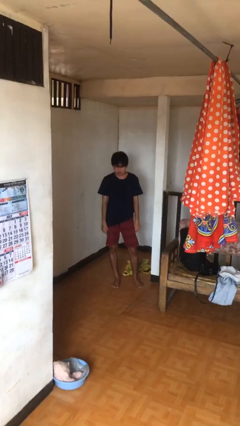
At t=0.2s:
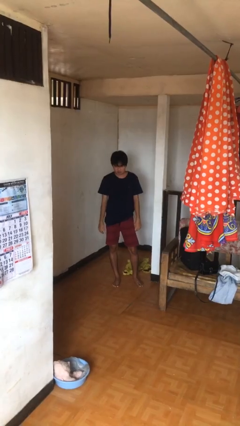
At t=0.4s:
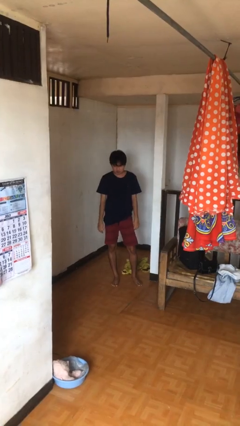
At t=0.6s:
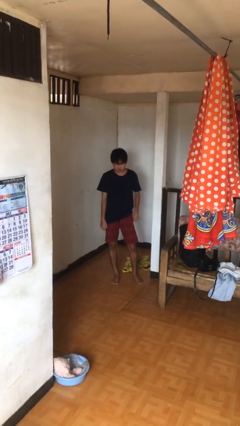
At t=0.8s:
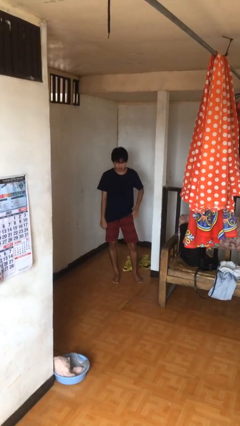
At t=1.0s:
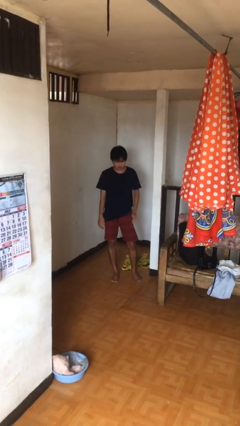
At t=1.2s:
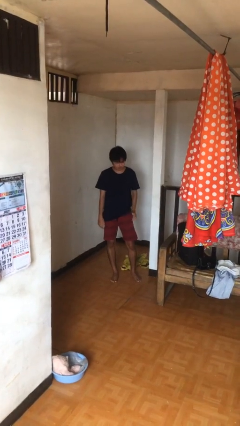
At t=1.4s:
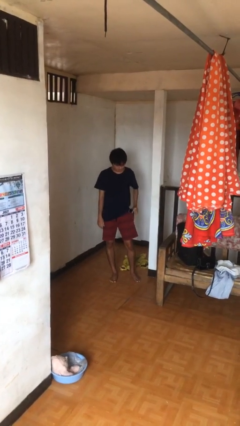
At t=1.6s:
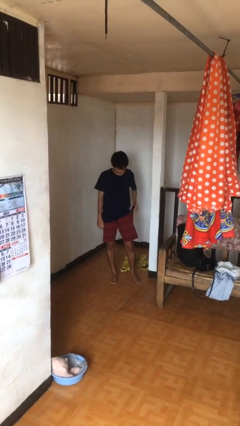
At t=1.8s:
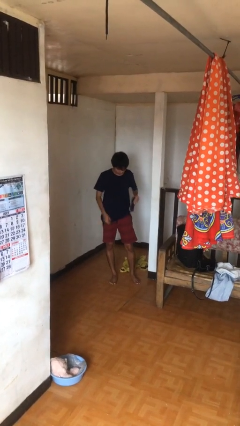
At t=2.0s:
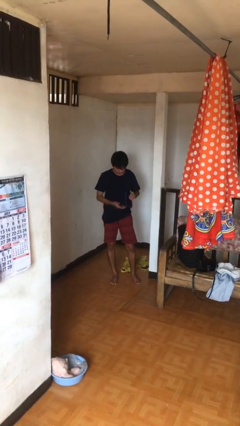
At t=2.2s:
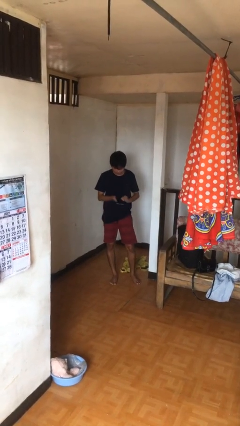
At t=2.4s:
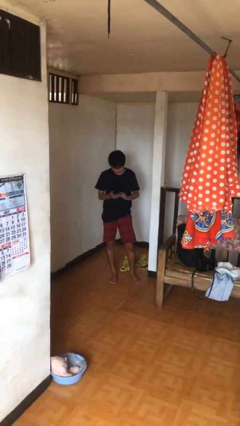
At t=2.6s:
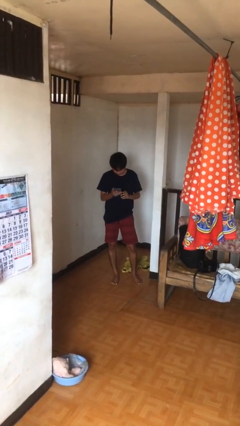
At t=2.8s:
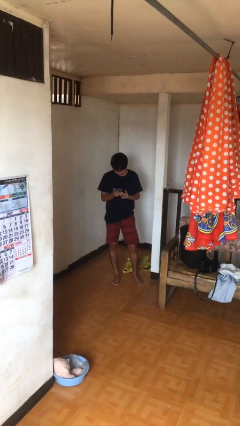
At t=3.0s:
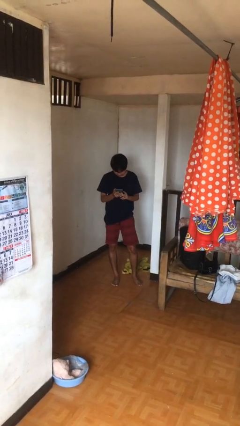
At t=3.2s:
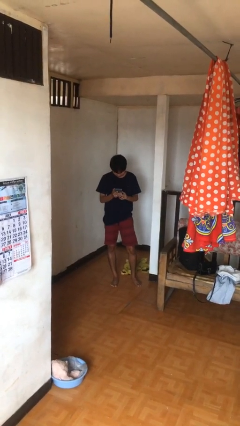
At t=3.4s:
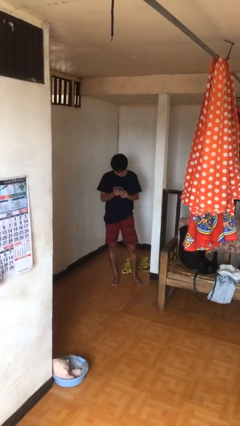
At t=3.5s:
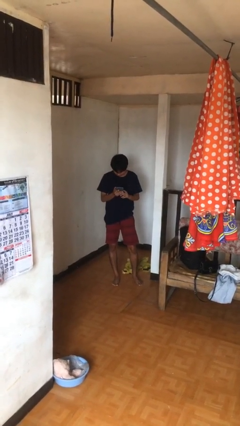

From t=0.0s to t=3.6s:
person takes phone from pocket

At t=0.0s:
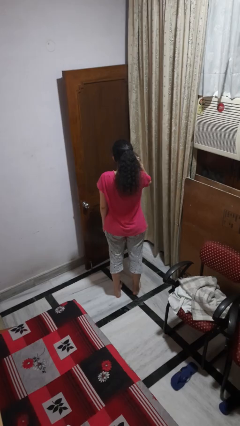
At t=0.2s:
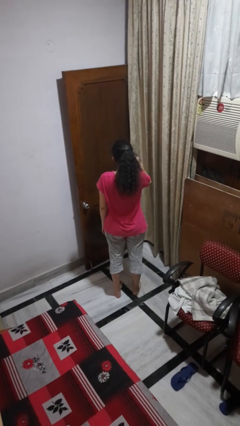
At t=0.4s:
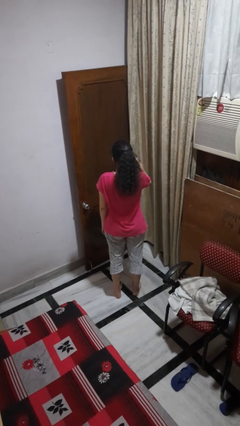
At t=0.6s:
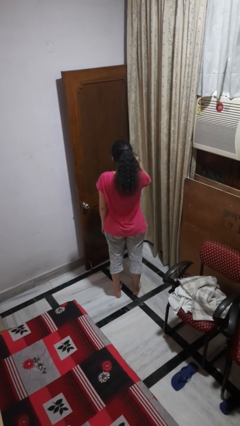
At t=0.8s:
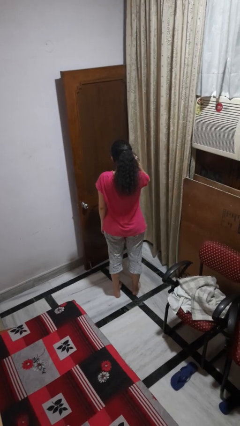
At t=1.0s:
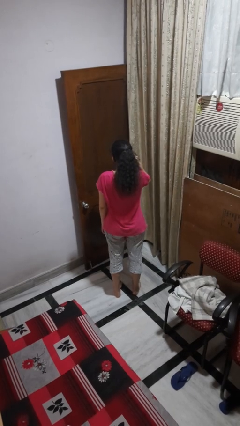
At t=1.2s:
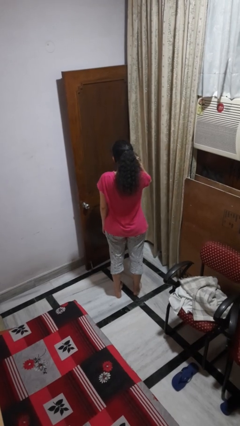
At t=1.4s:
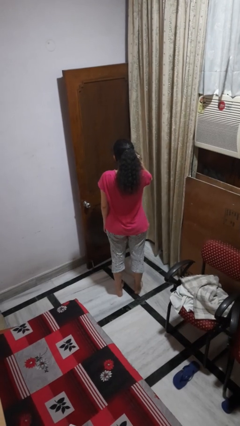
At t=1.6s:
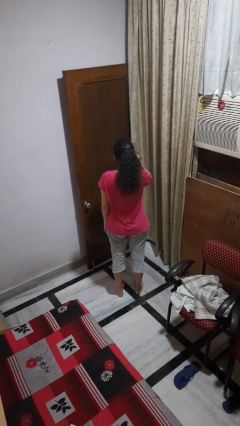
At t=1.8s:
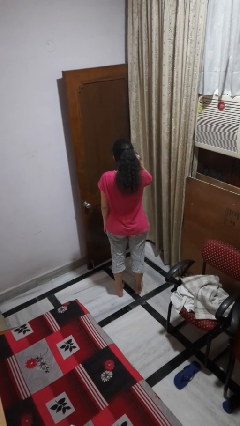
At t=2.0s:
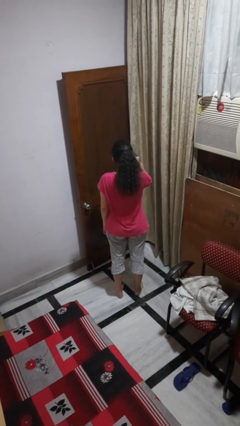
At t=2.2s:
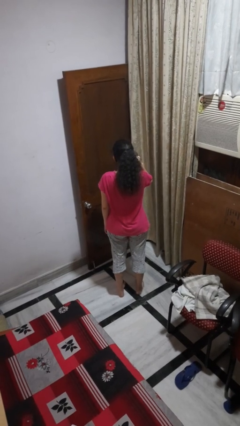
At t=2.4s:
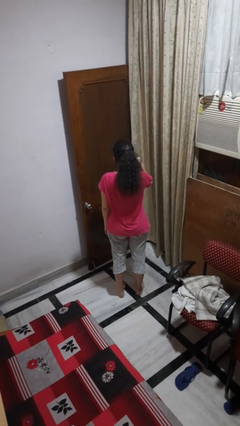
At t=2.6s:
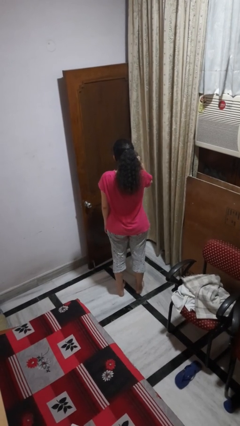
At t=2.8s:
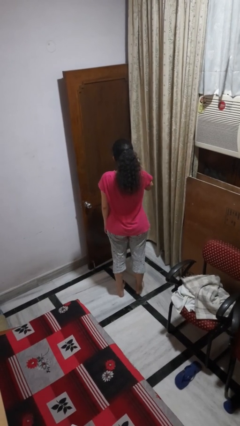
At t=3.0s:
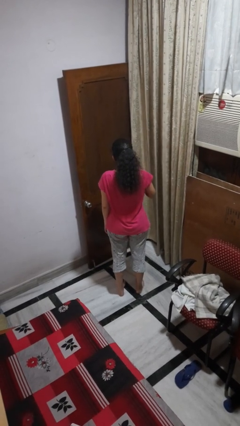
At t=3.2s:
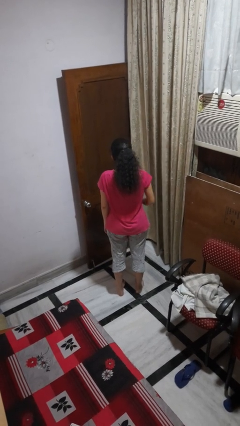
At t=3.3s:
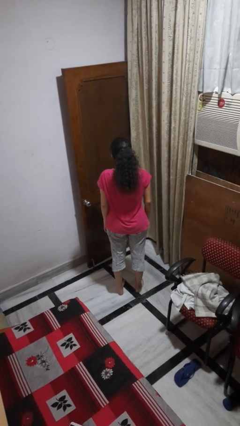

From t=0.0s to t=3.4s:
person touches earlobe

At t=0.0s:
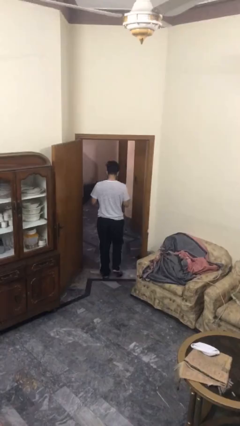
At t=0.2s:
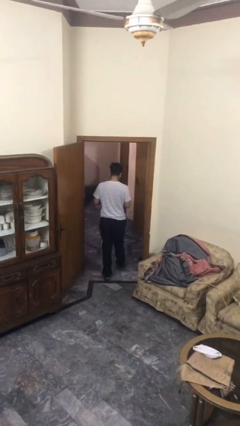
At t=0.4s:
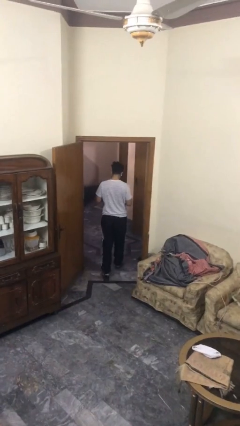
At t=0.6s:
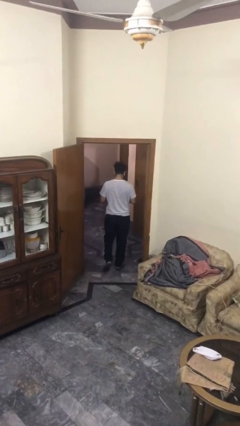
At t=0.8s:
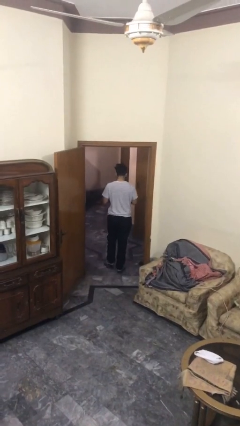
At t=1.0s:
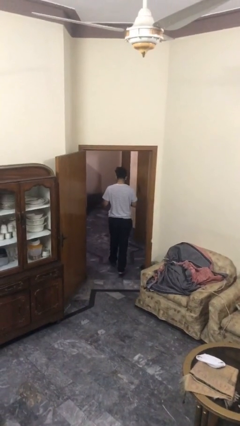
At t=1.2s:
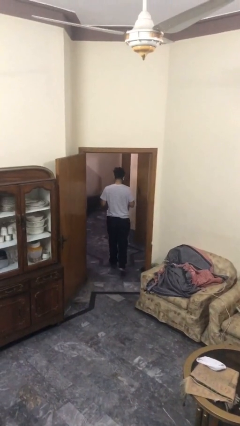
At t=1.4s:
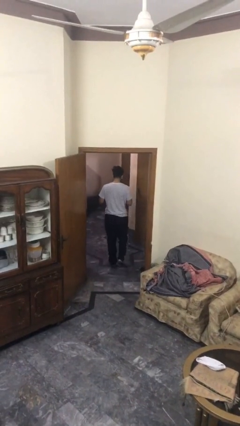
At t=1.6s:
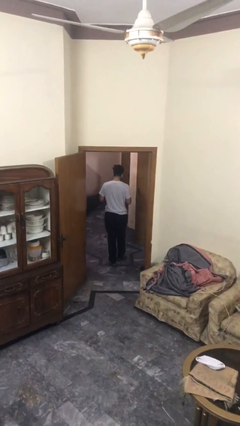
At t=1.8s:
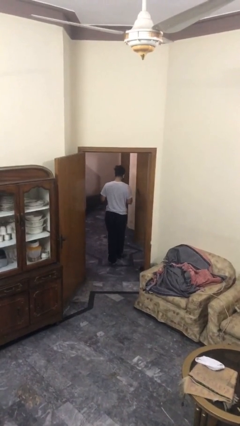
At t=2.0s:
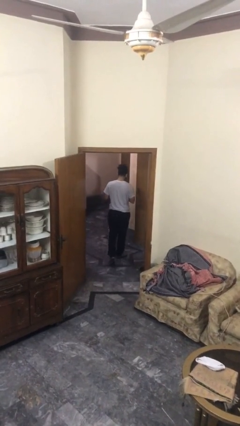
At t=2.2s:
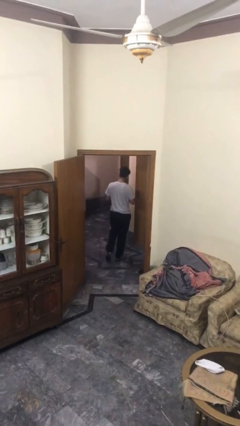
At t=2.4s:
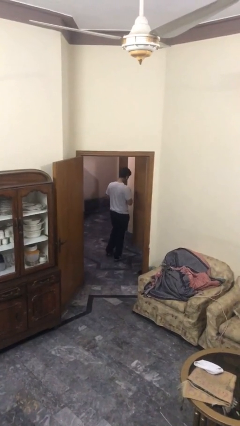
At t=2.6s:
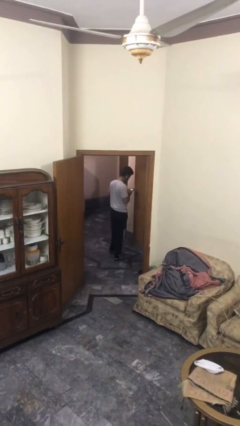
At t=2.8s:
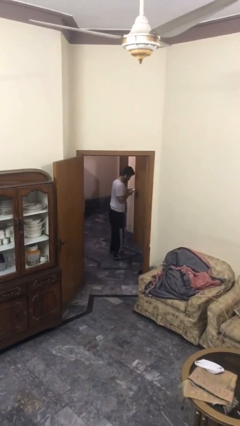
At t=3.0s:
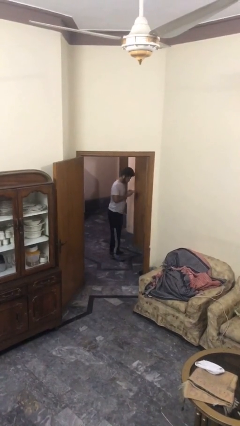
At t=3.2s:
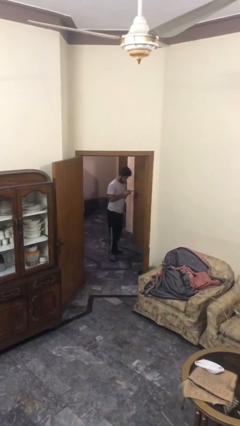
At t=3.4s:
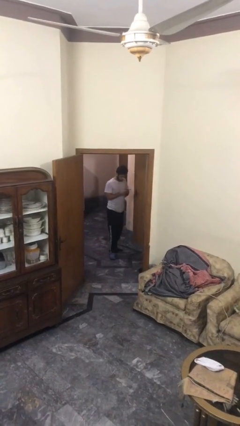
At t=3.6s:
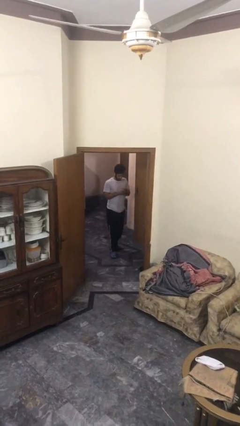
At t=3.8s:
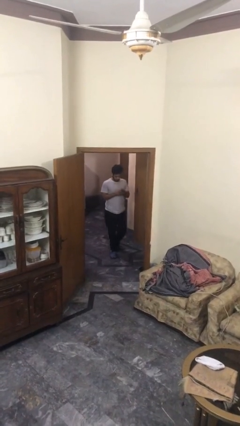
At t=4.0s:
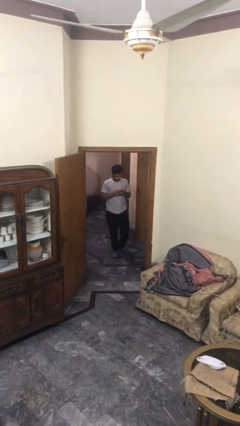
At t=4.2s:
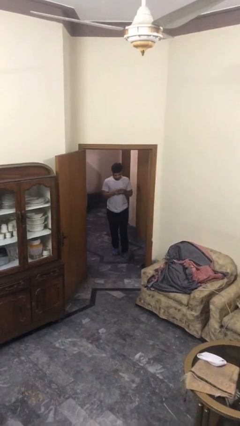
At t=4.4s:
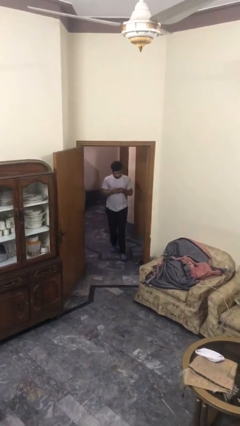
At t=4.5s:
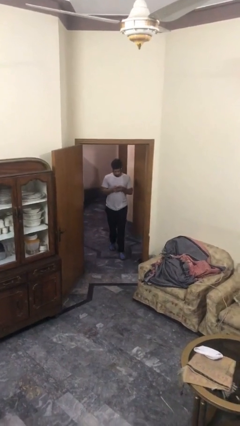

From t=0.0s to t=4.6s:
person exits scene through structure

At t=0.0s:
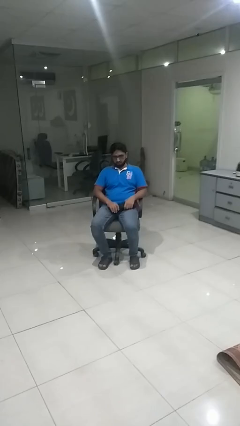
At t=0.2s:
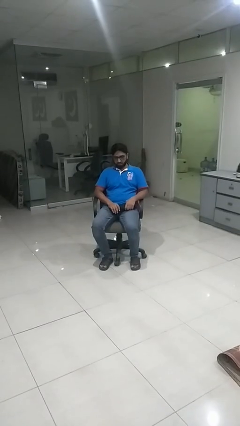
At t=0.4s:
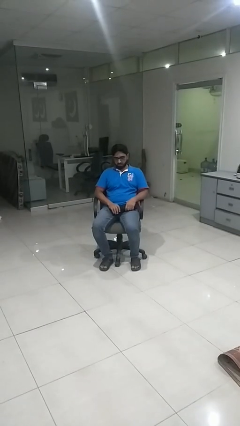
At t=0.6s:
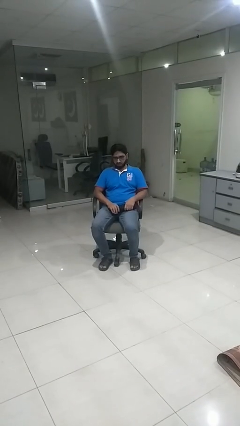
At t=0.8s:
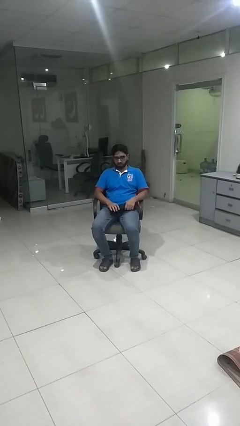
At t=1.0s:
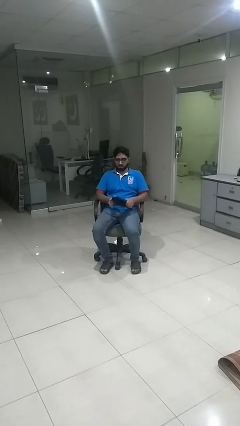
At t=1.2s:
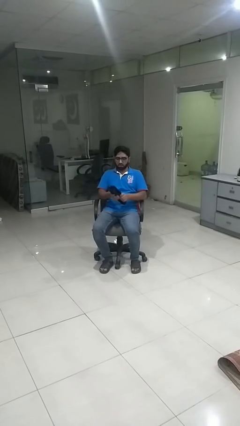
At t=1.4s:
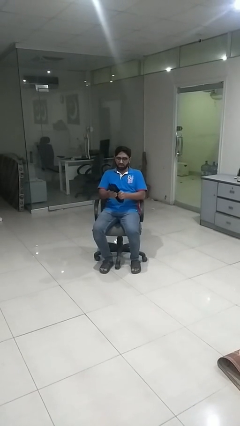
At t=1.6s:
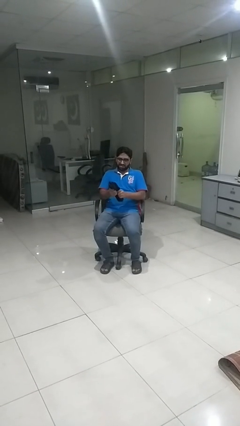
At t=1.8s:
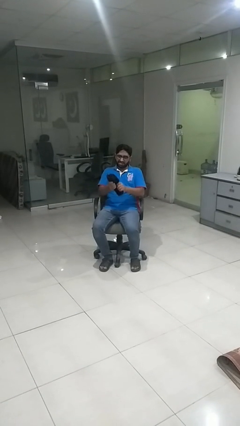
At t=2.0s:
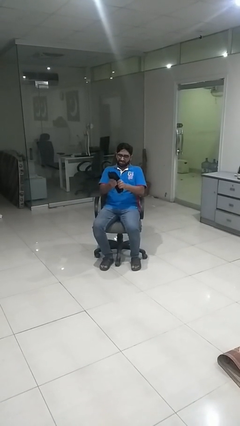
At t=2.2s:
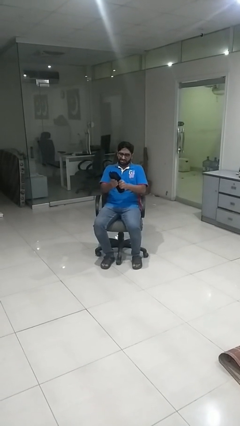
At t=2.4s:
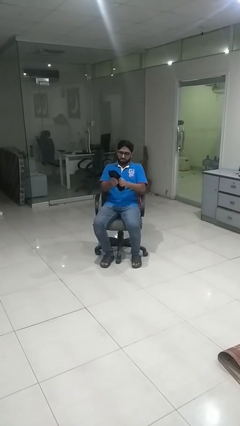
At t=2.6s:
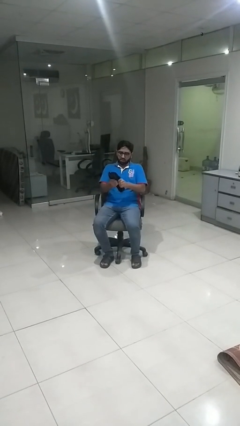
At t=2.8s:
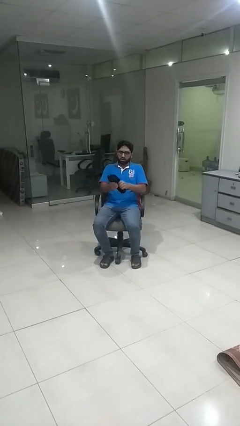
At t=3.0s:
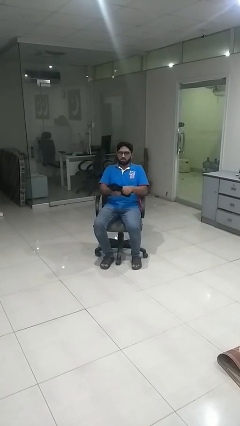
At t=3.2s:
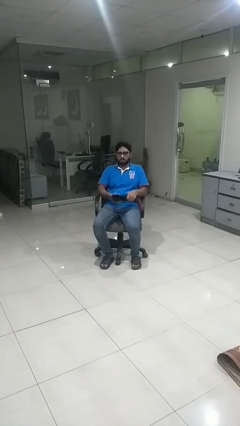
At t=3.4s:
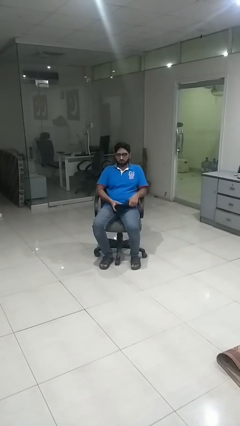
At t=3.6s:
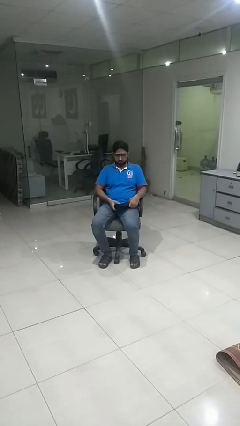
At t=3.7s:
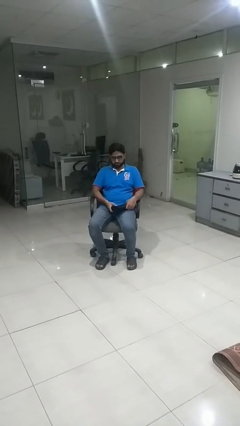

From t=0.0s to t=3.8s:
person squeezes object

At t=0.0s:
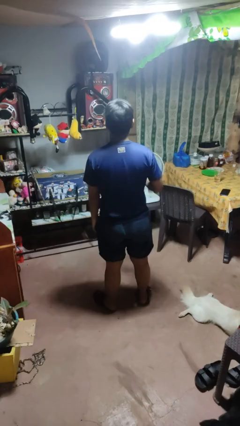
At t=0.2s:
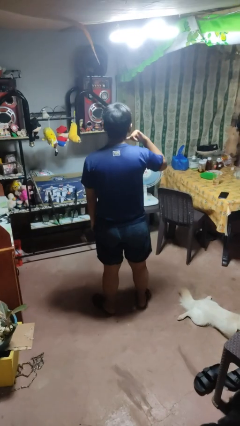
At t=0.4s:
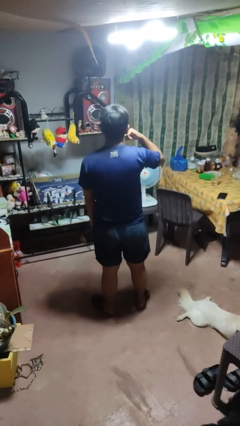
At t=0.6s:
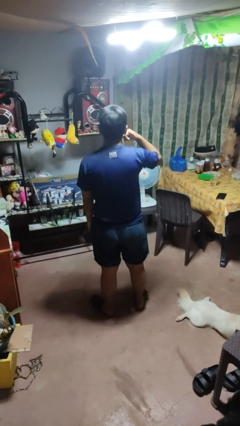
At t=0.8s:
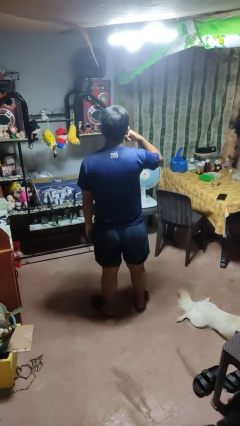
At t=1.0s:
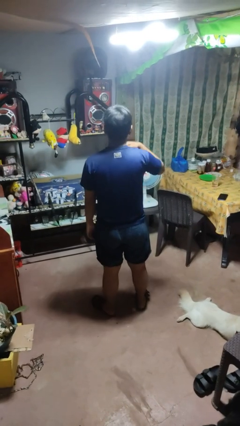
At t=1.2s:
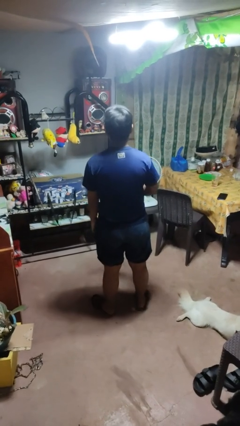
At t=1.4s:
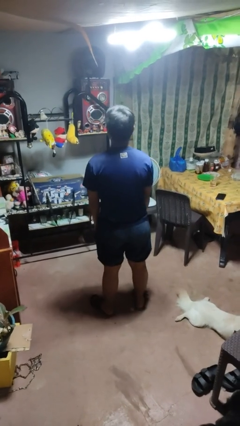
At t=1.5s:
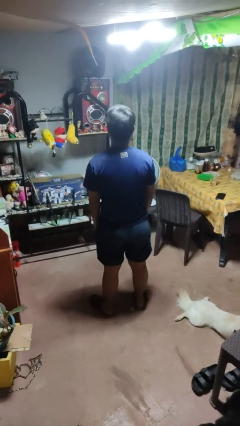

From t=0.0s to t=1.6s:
person gestures call me

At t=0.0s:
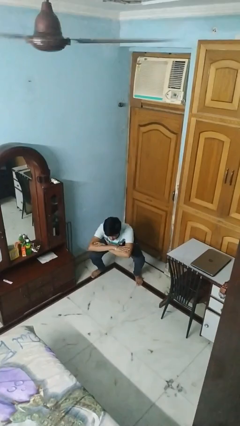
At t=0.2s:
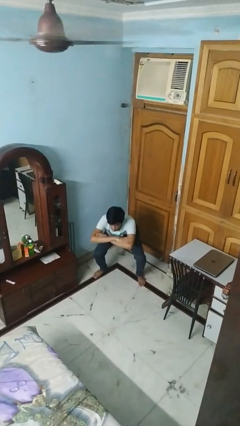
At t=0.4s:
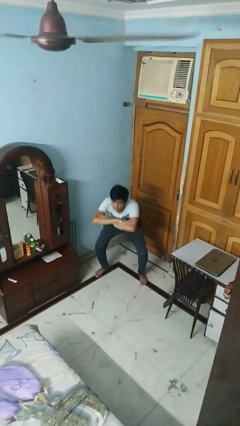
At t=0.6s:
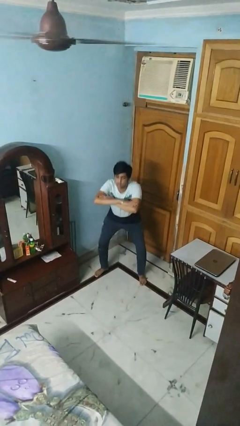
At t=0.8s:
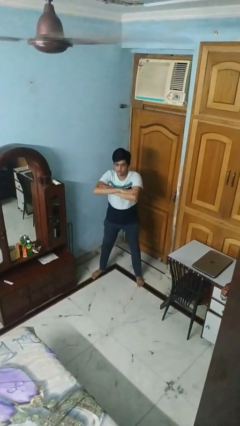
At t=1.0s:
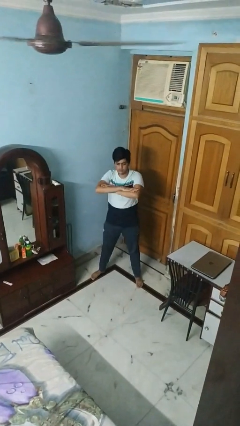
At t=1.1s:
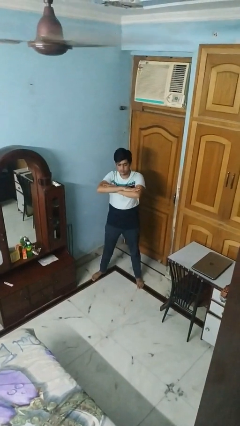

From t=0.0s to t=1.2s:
person stands up
